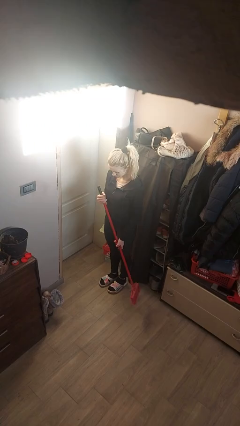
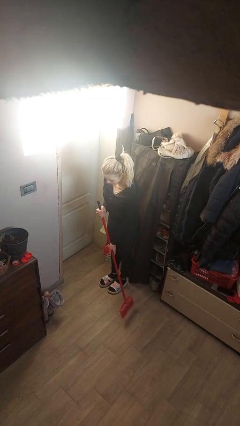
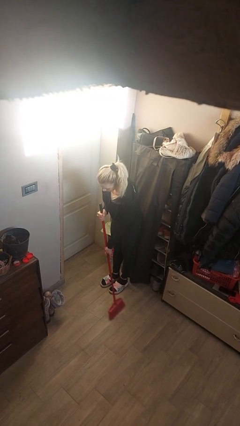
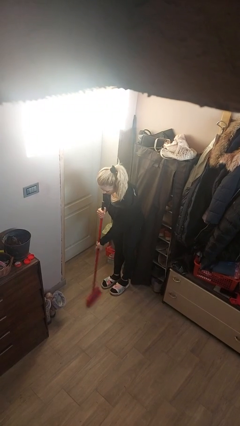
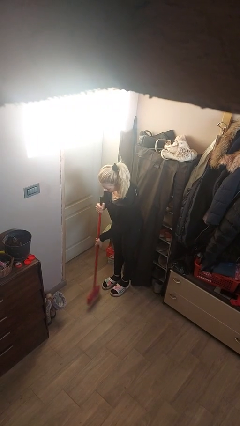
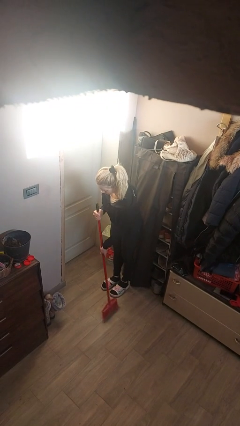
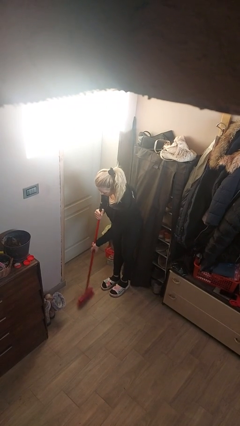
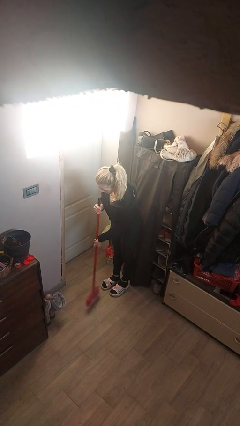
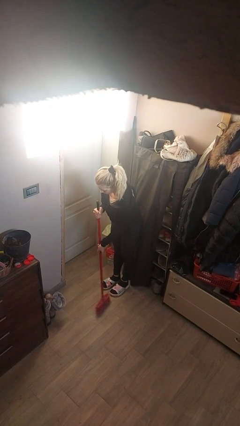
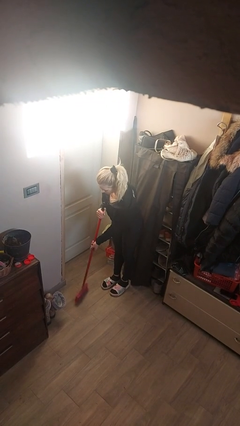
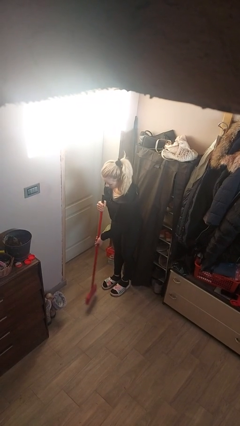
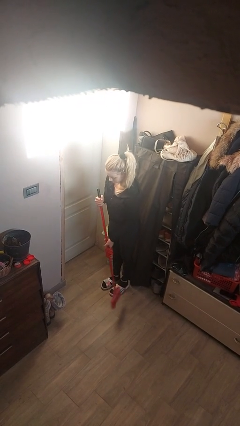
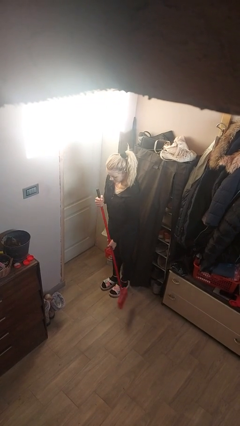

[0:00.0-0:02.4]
person sweeps floor

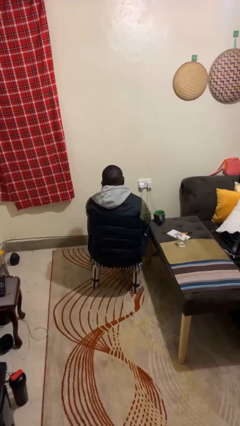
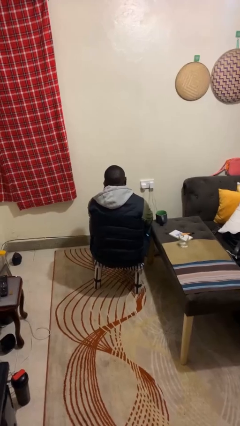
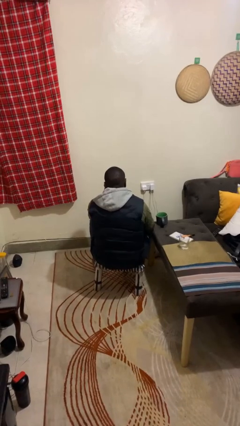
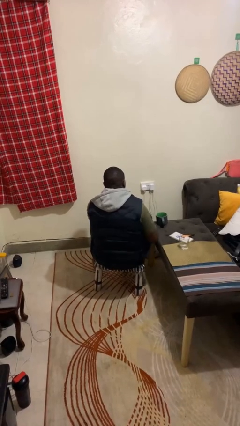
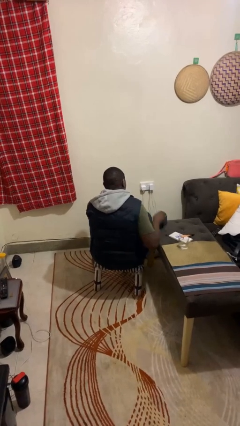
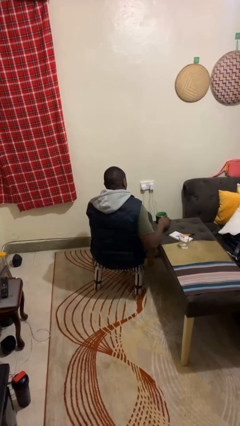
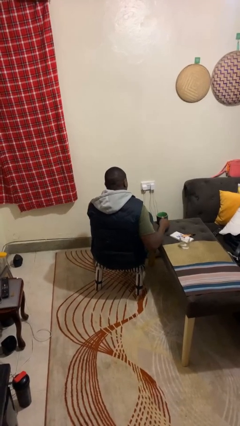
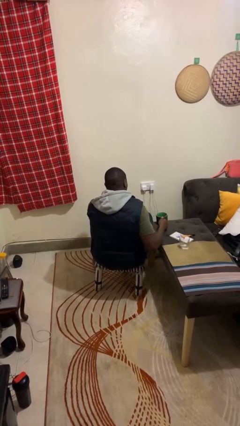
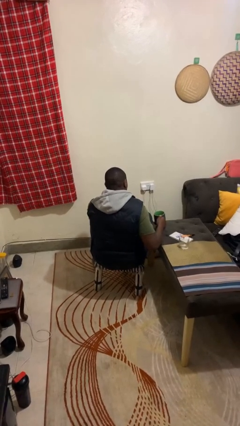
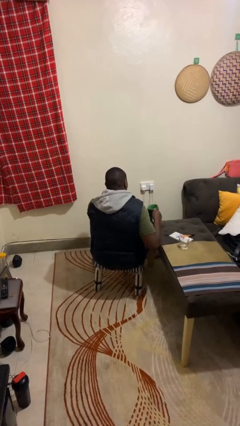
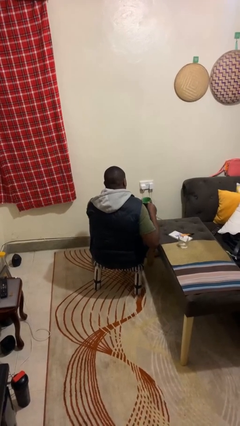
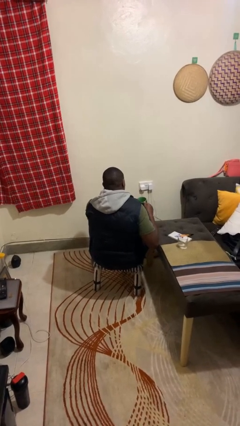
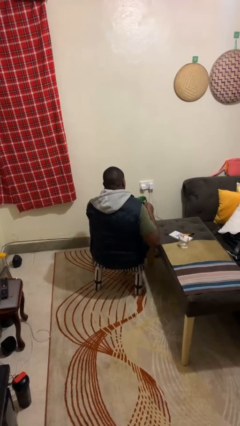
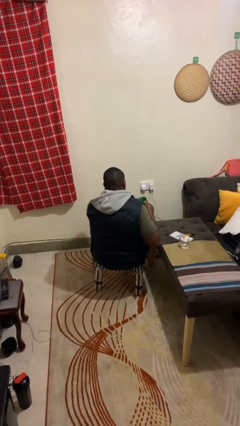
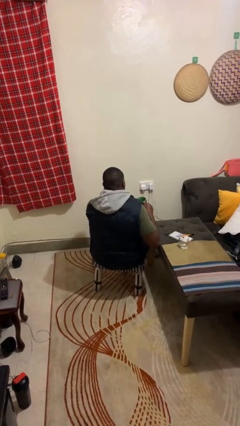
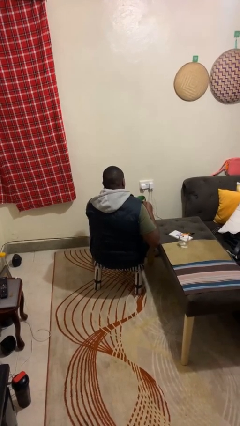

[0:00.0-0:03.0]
person picks up object from table

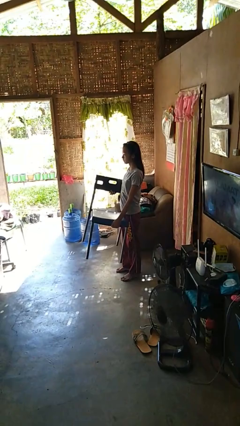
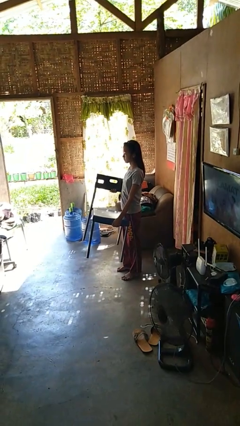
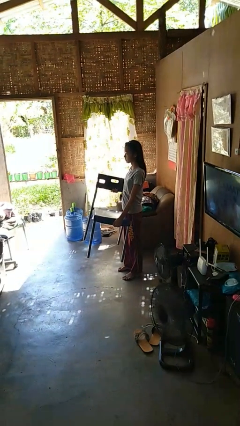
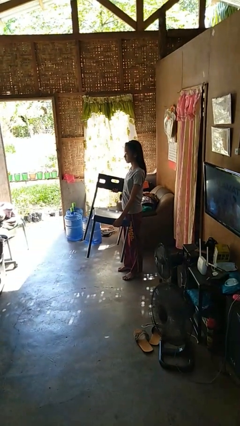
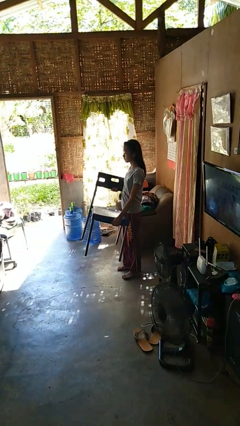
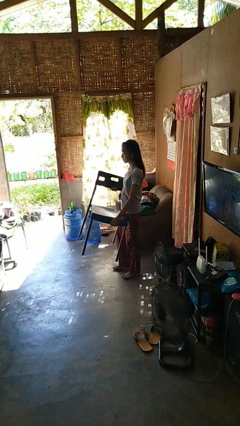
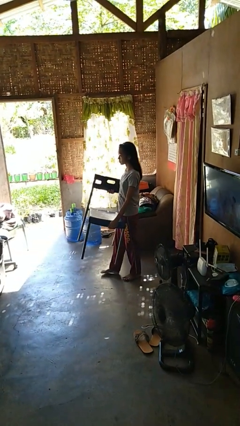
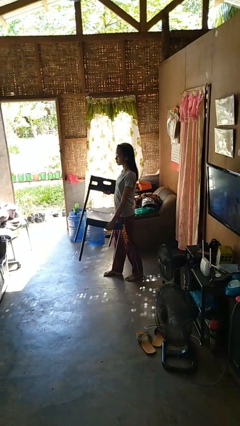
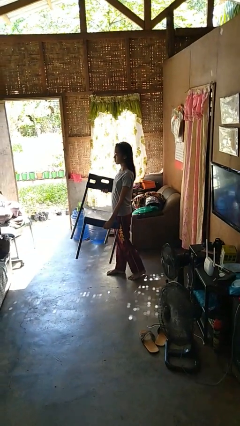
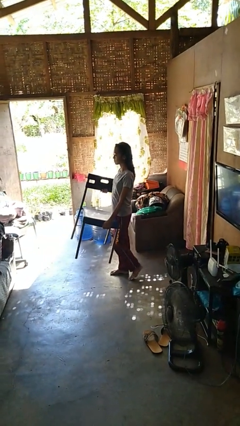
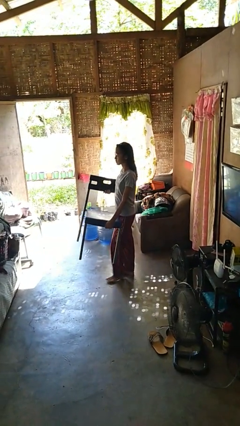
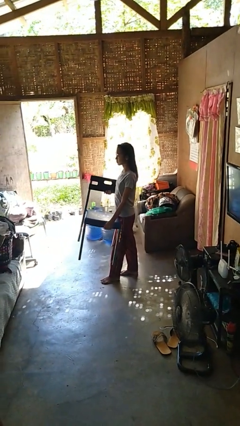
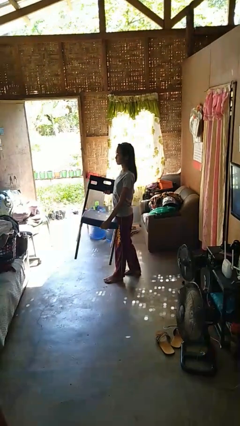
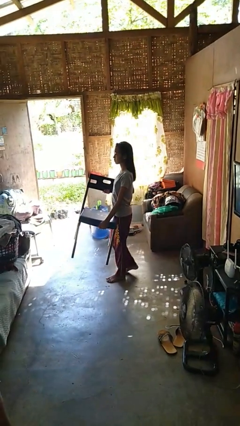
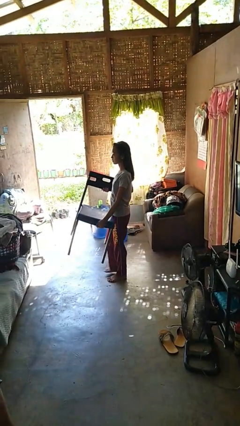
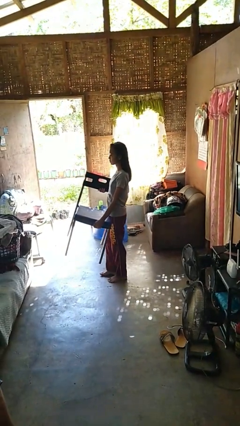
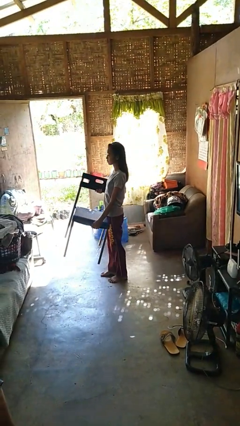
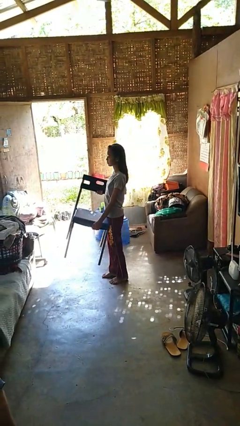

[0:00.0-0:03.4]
person carries furniture

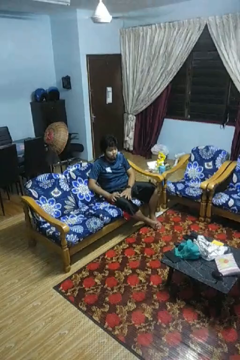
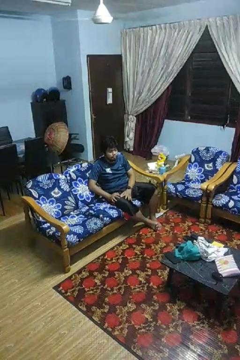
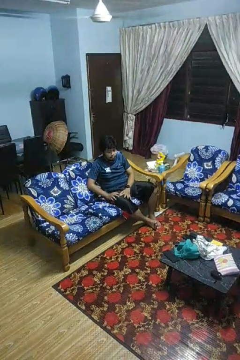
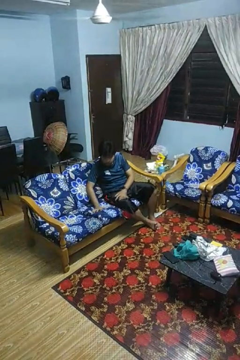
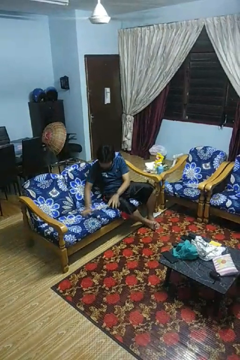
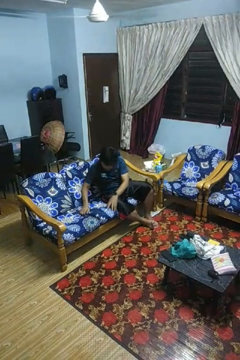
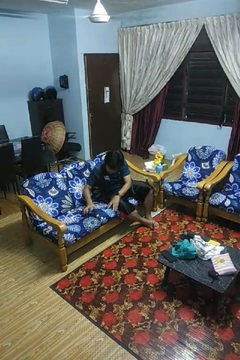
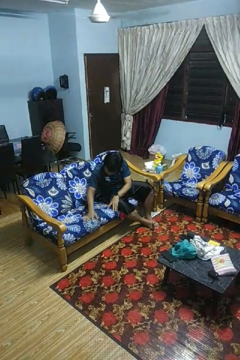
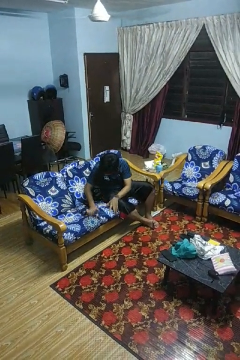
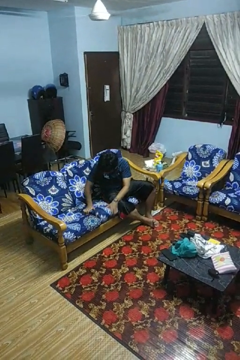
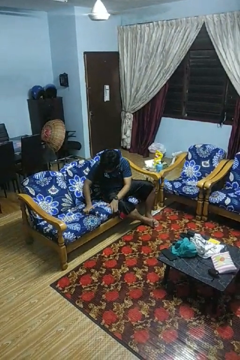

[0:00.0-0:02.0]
person searches in couch

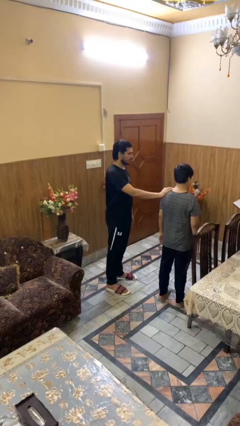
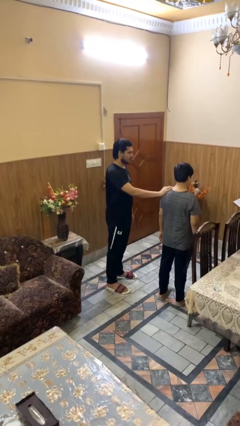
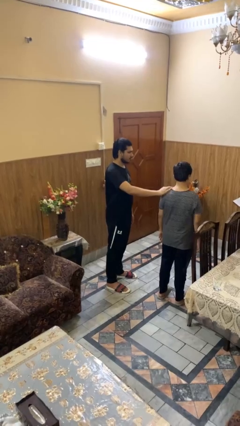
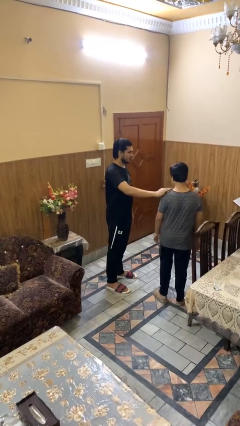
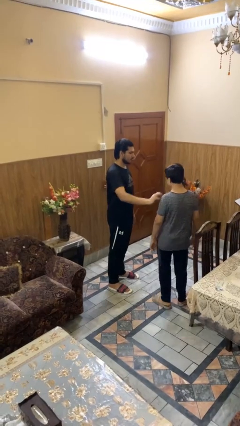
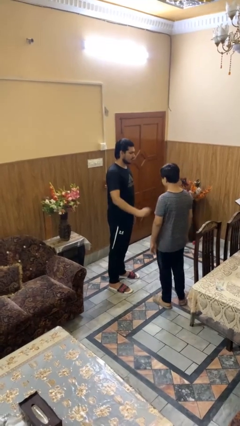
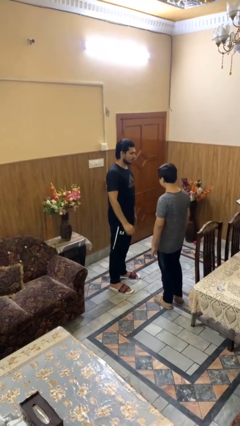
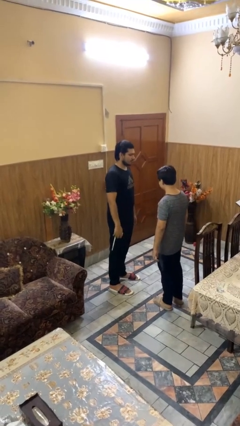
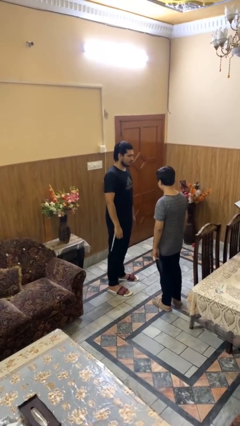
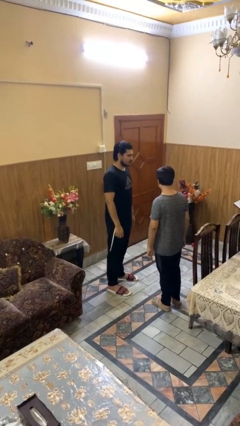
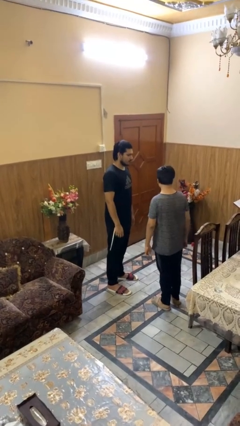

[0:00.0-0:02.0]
person spins person around

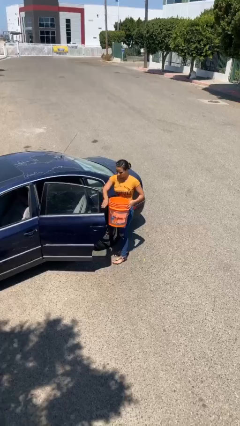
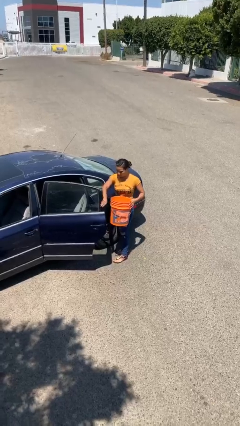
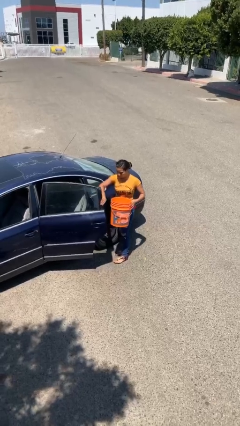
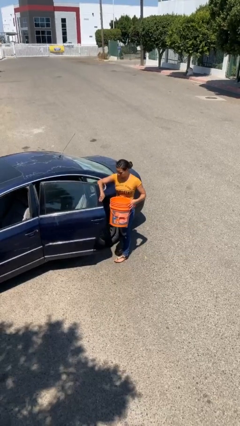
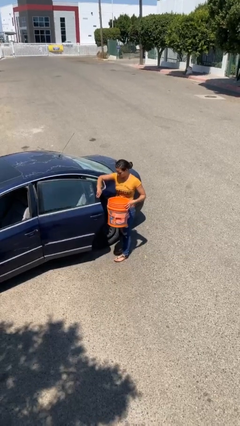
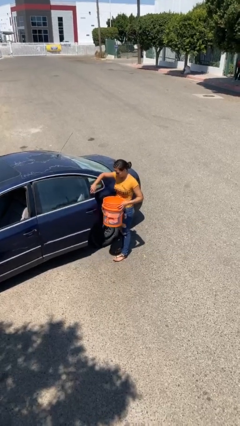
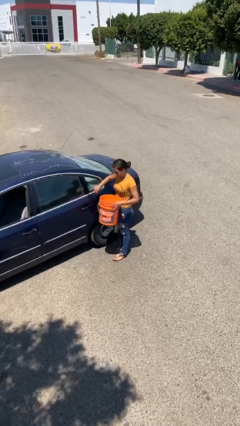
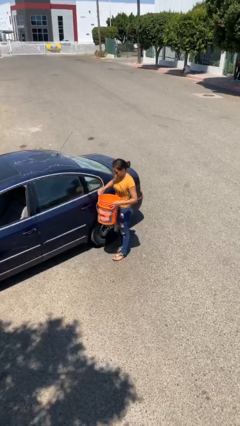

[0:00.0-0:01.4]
person closes car door

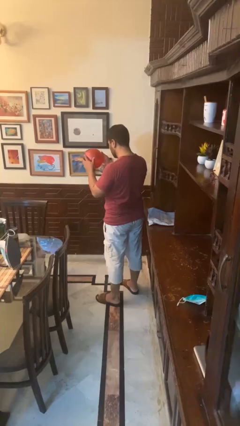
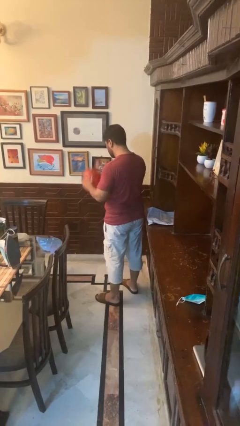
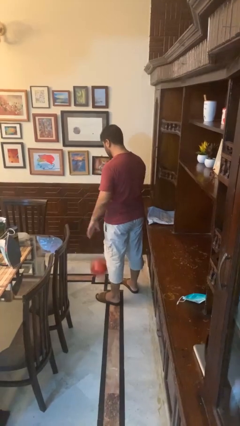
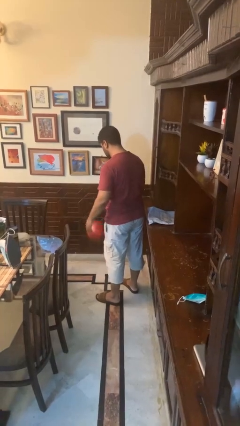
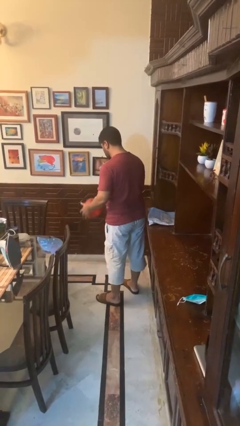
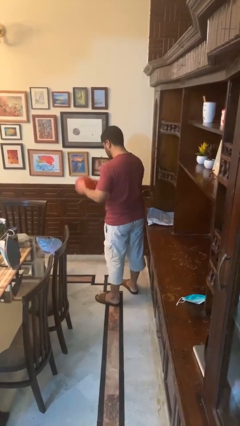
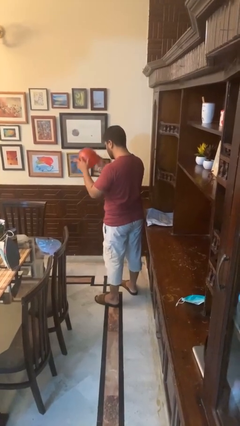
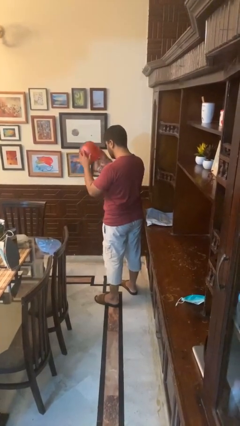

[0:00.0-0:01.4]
person bounces ball on floor

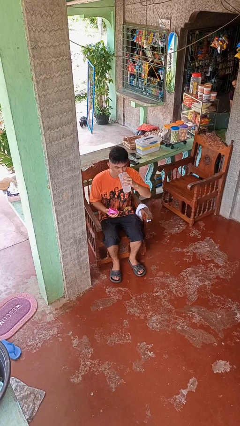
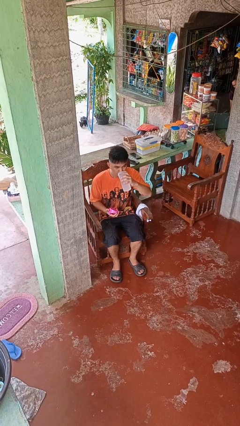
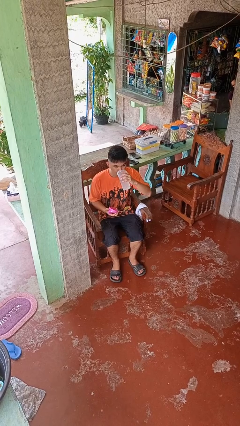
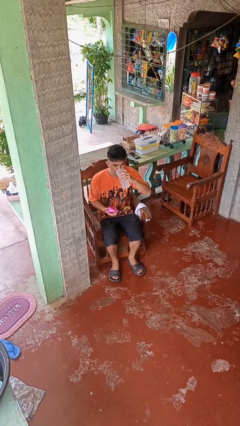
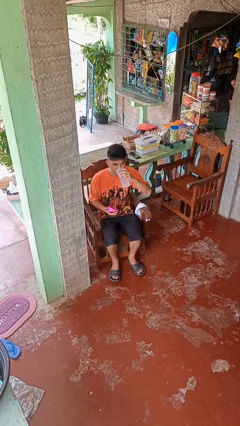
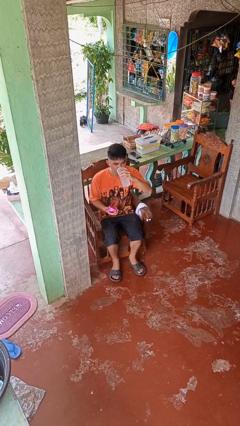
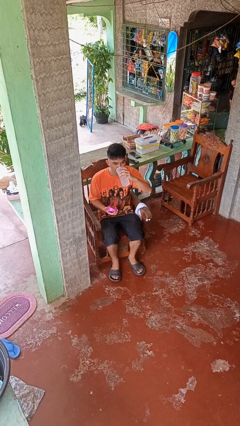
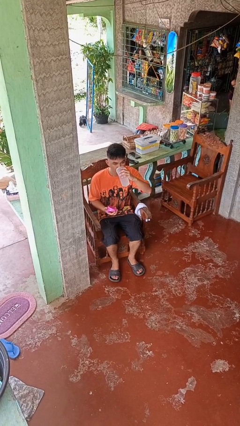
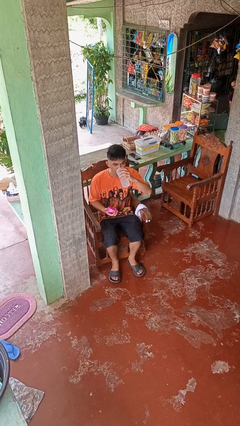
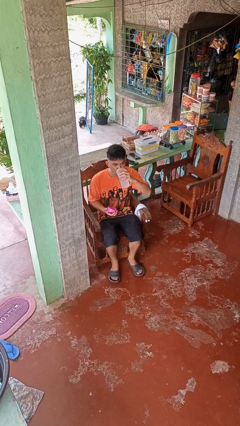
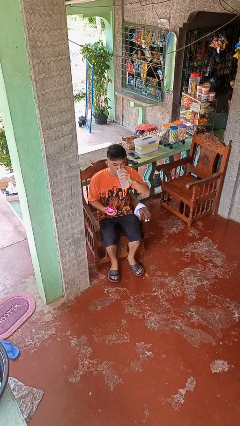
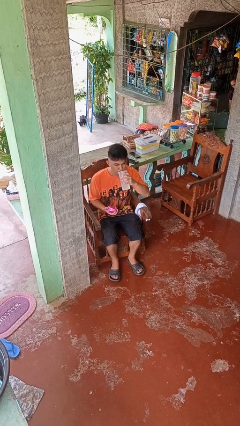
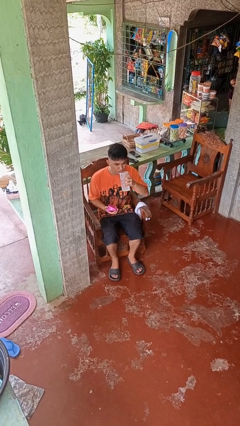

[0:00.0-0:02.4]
person drinks from bottle
